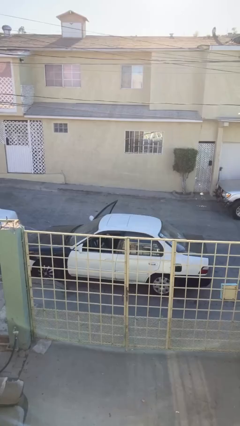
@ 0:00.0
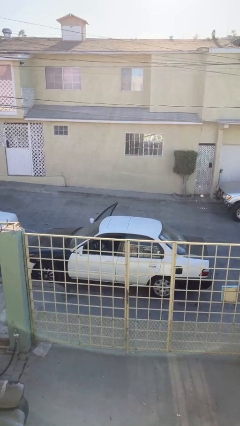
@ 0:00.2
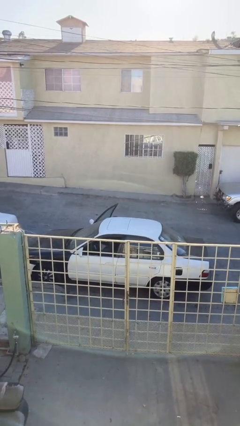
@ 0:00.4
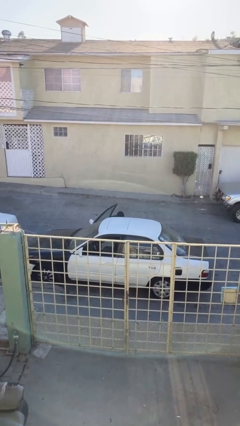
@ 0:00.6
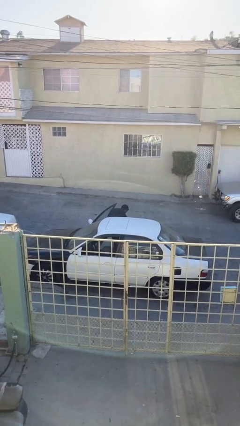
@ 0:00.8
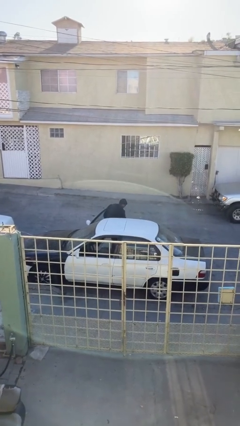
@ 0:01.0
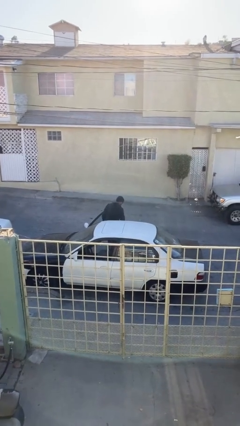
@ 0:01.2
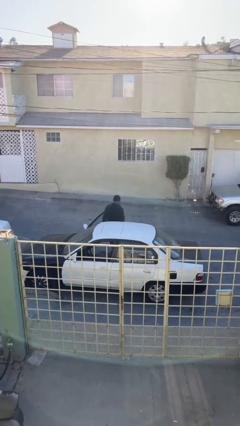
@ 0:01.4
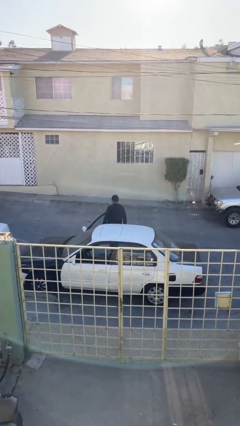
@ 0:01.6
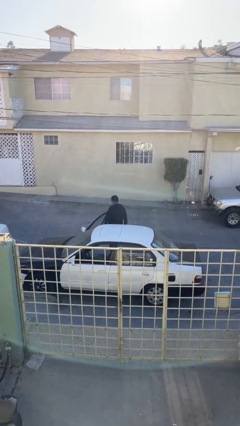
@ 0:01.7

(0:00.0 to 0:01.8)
person exits car

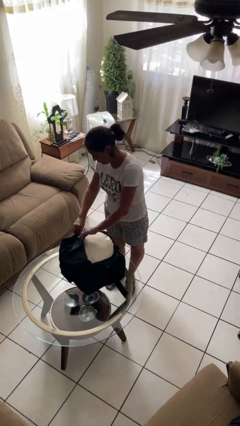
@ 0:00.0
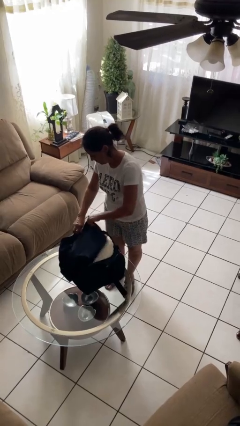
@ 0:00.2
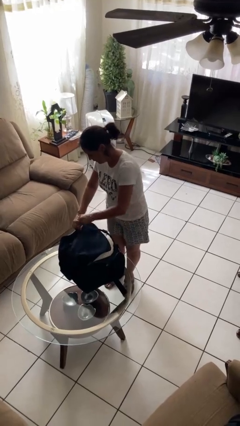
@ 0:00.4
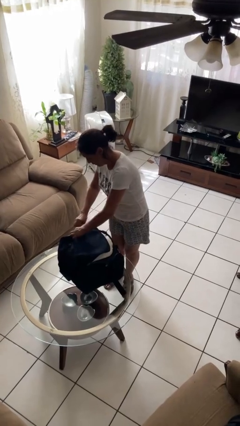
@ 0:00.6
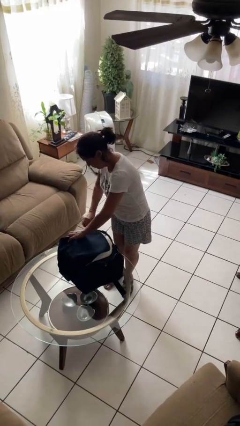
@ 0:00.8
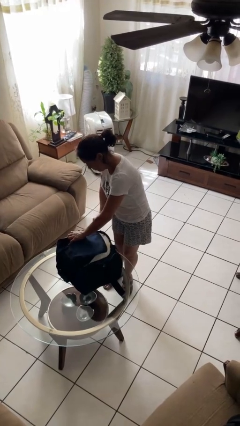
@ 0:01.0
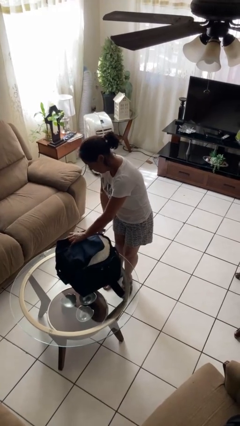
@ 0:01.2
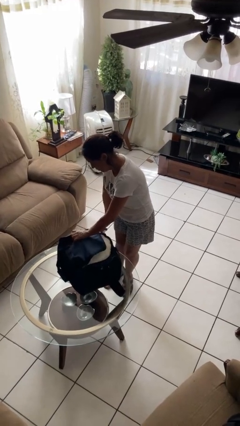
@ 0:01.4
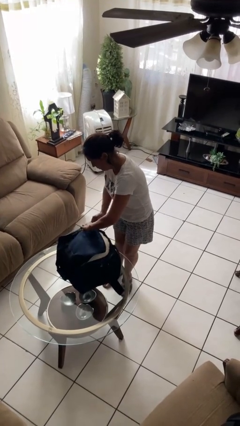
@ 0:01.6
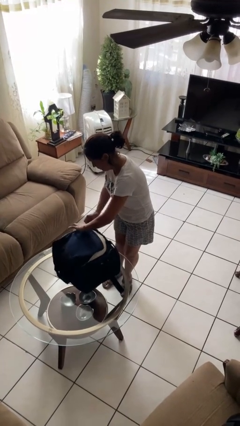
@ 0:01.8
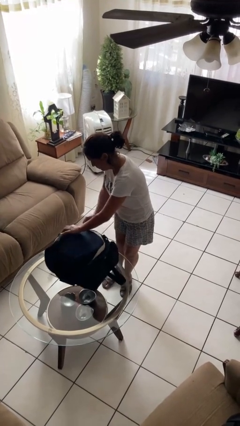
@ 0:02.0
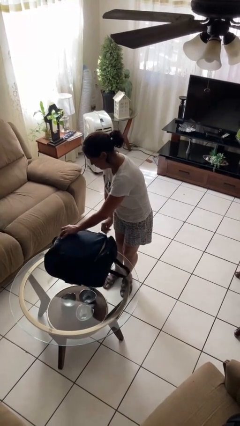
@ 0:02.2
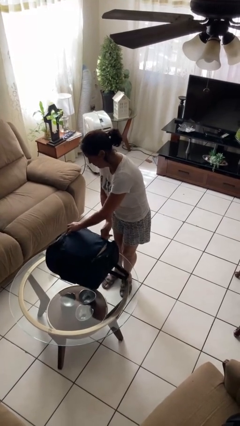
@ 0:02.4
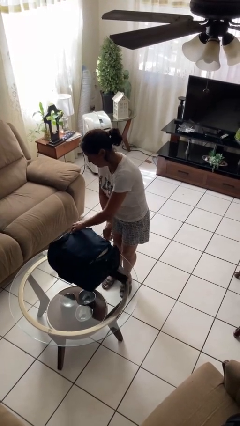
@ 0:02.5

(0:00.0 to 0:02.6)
person closes suitcase

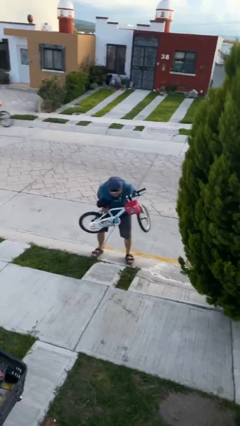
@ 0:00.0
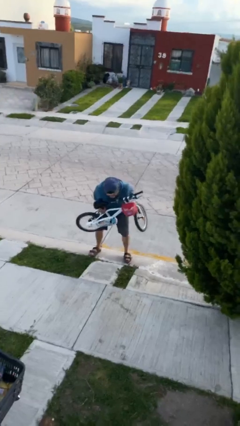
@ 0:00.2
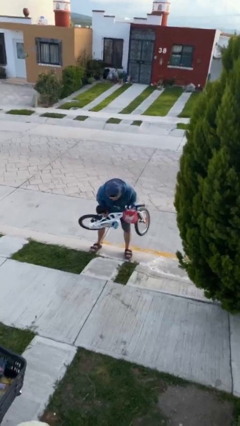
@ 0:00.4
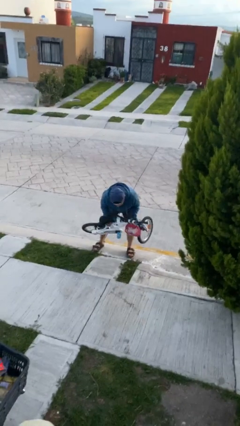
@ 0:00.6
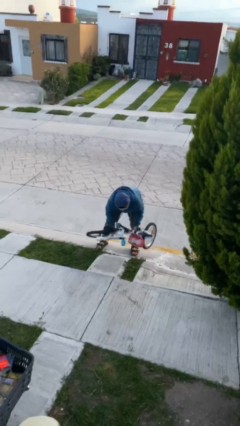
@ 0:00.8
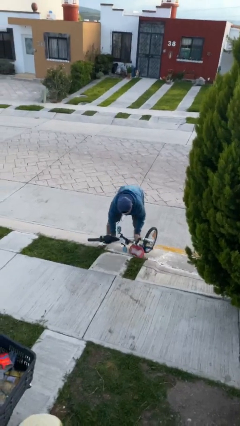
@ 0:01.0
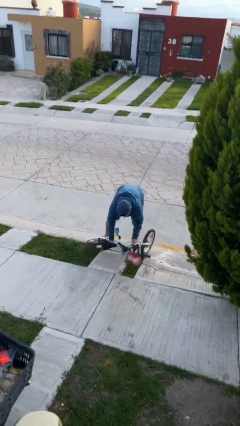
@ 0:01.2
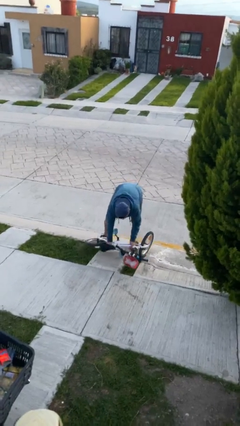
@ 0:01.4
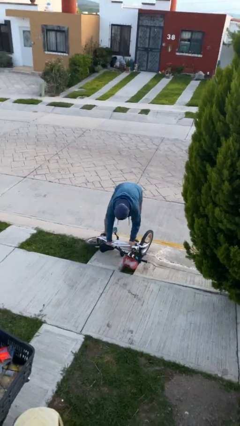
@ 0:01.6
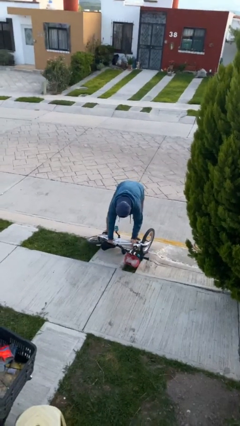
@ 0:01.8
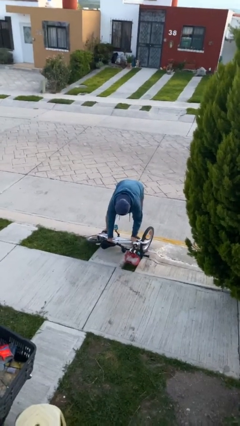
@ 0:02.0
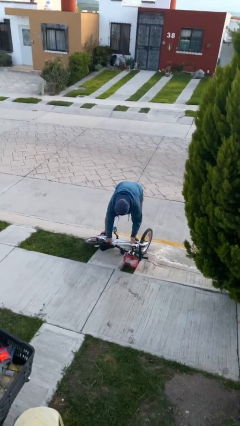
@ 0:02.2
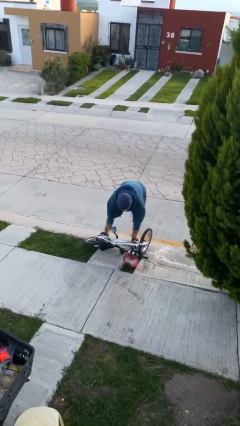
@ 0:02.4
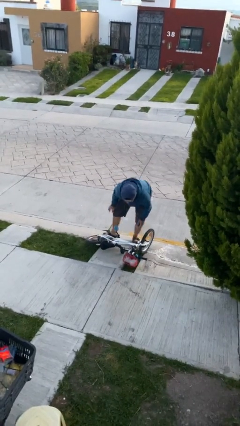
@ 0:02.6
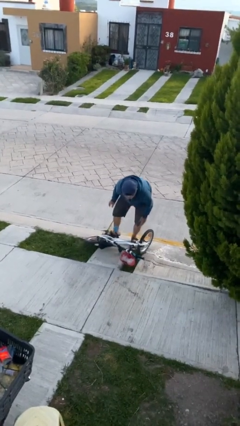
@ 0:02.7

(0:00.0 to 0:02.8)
person puts down object on floor

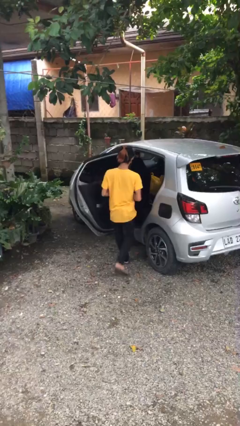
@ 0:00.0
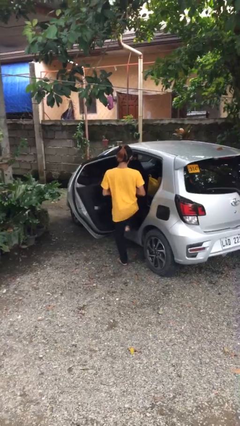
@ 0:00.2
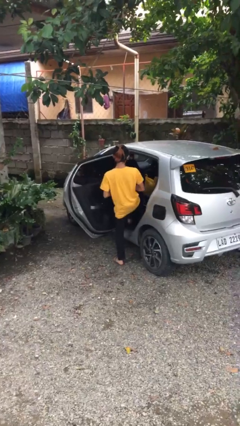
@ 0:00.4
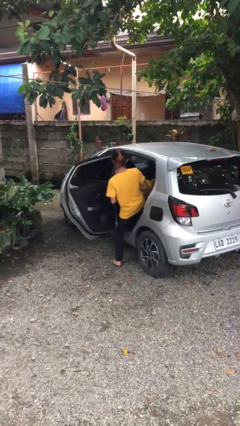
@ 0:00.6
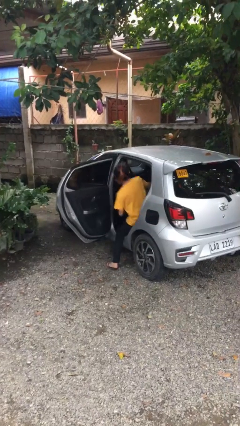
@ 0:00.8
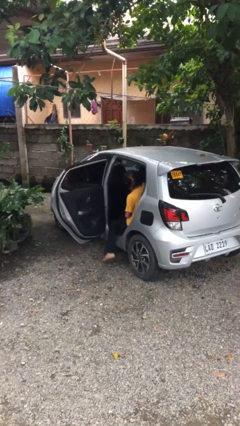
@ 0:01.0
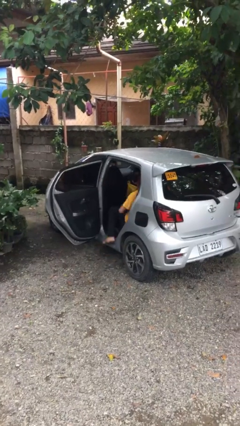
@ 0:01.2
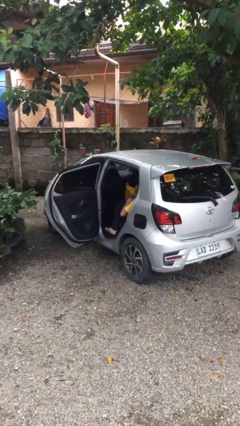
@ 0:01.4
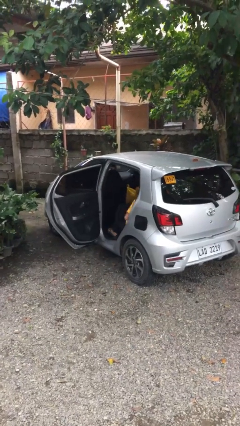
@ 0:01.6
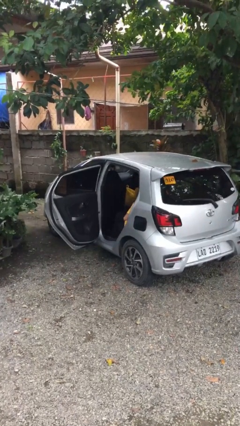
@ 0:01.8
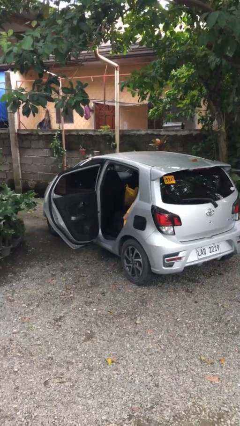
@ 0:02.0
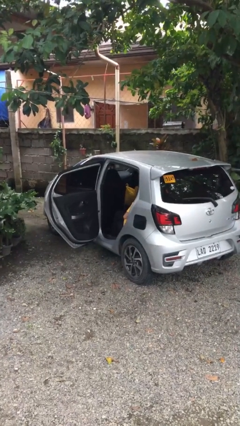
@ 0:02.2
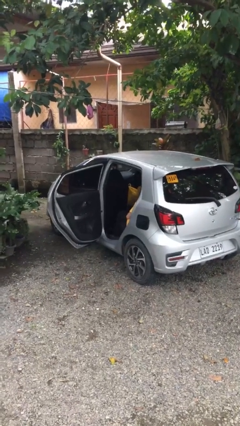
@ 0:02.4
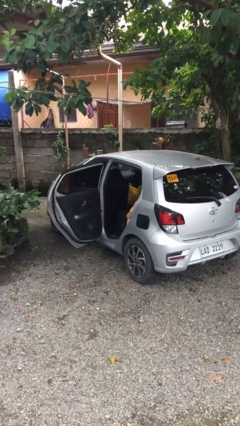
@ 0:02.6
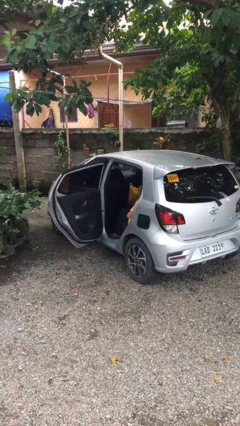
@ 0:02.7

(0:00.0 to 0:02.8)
person enters car

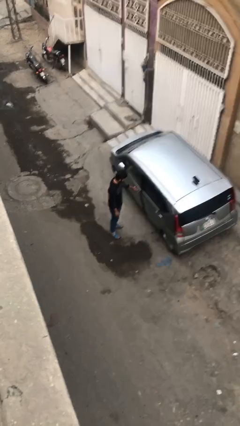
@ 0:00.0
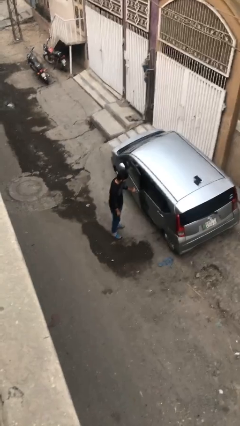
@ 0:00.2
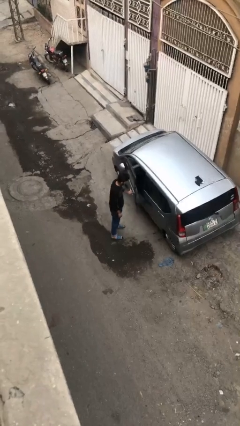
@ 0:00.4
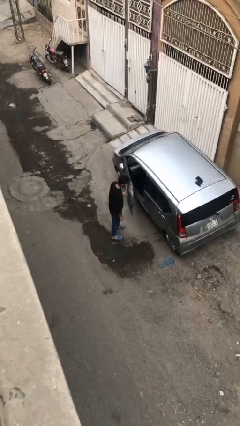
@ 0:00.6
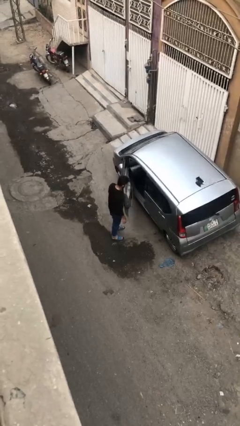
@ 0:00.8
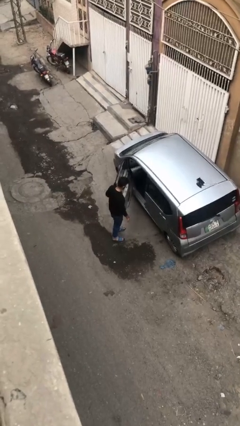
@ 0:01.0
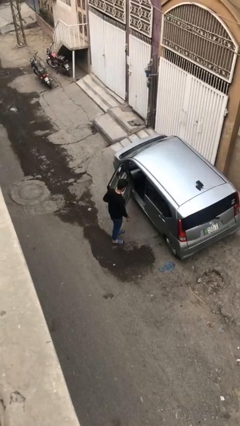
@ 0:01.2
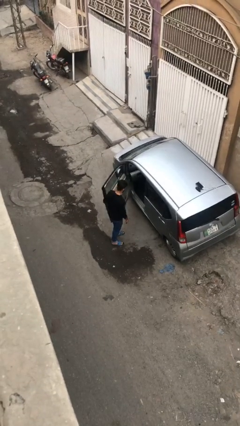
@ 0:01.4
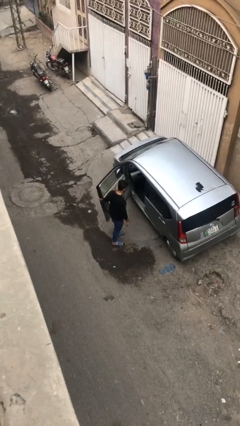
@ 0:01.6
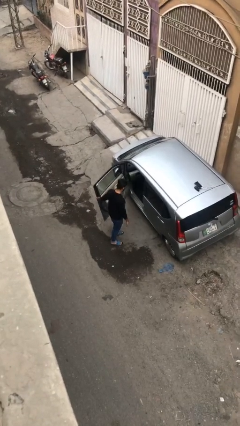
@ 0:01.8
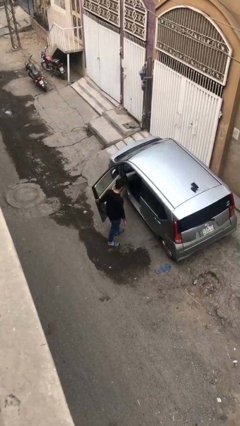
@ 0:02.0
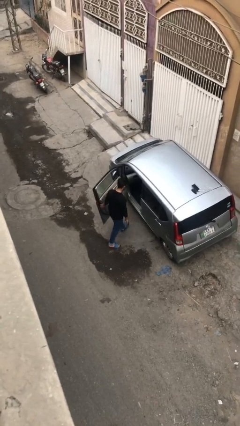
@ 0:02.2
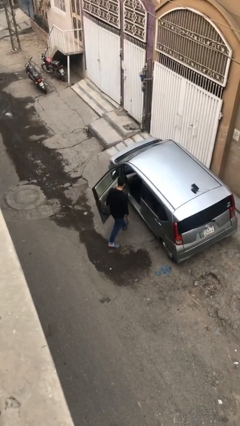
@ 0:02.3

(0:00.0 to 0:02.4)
person opens car door

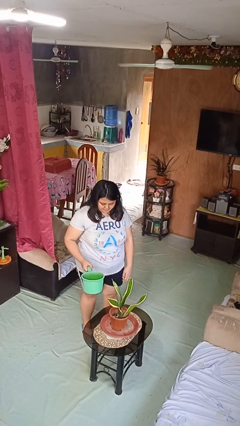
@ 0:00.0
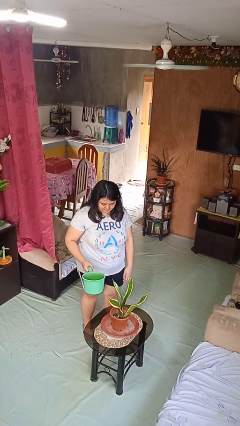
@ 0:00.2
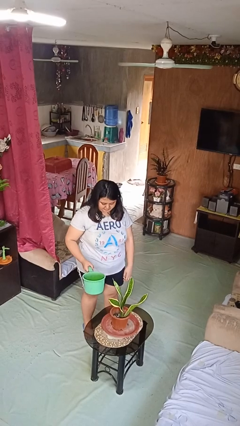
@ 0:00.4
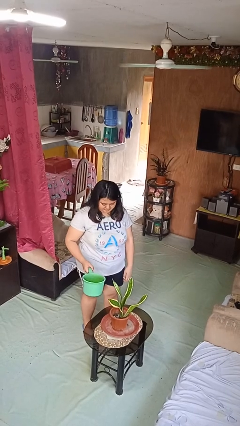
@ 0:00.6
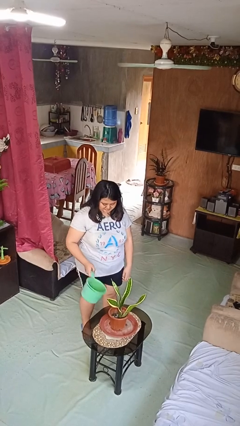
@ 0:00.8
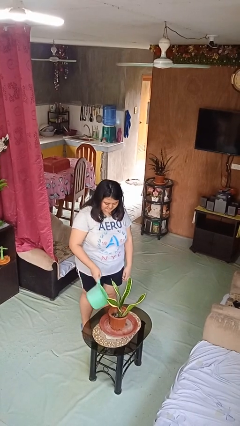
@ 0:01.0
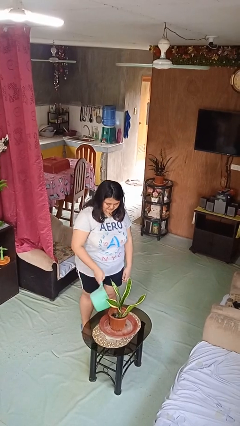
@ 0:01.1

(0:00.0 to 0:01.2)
person waters houseplant

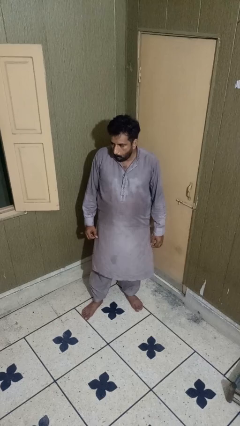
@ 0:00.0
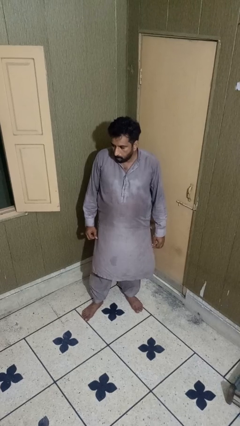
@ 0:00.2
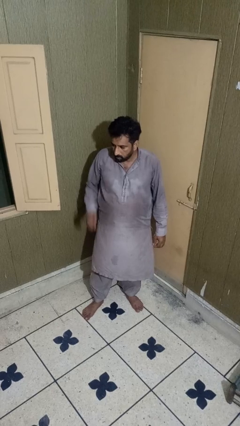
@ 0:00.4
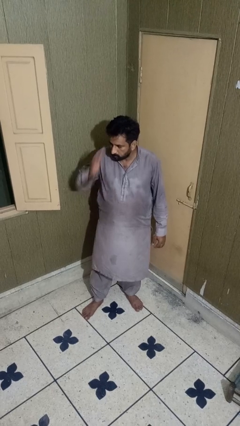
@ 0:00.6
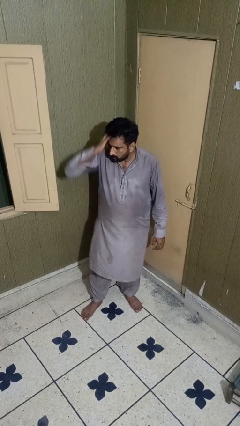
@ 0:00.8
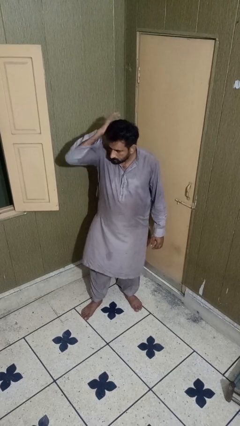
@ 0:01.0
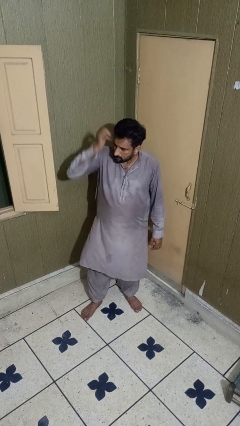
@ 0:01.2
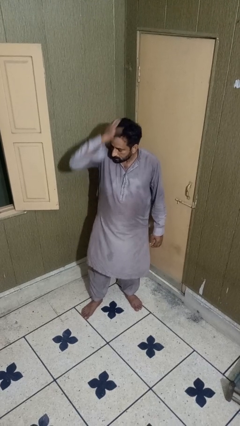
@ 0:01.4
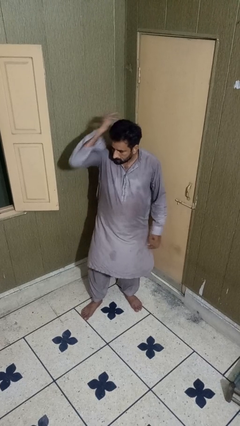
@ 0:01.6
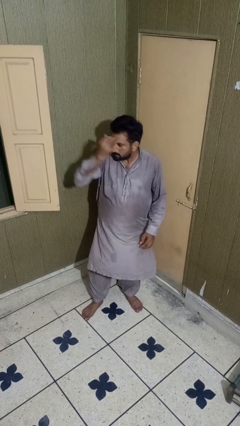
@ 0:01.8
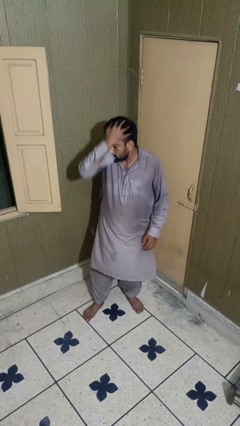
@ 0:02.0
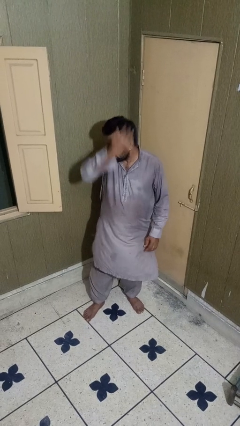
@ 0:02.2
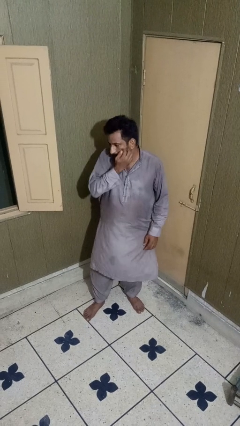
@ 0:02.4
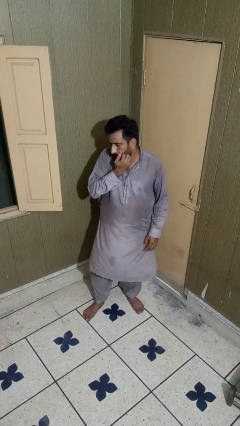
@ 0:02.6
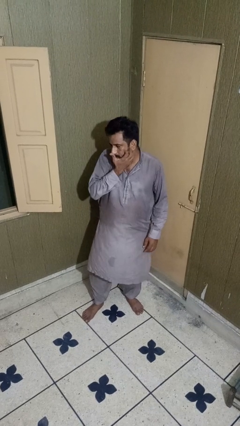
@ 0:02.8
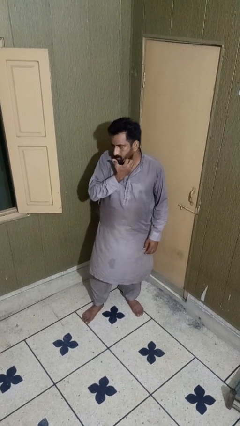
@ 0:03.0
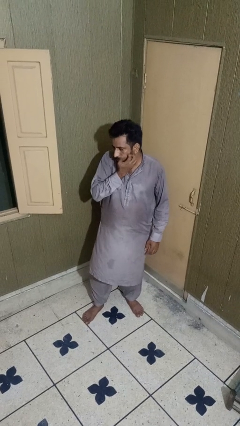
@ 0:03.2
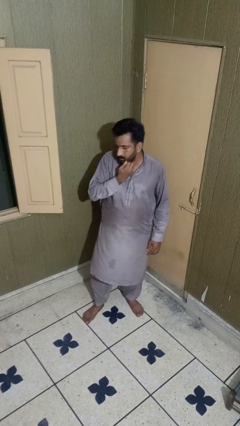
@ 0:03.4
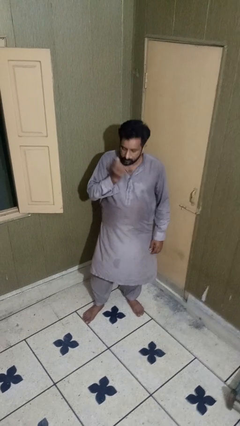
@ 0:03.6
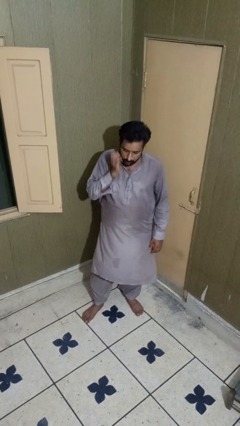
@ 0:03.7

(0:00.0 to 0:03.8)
person scratches face
